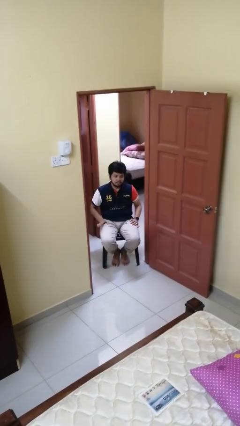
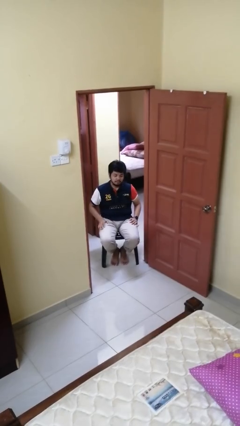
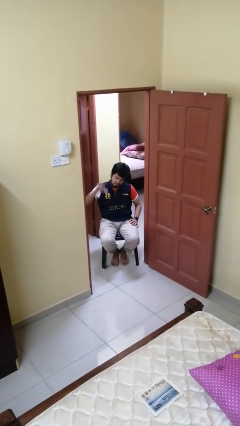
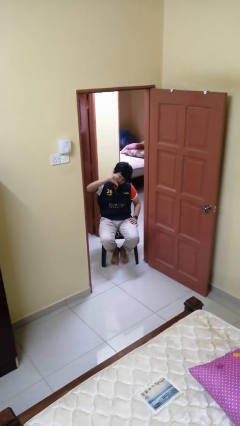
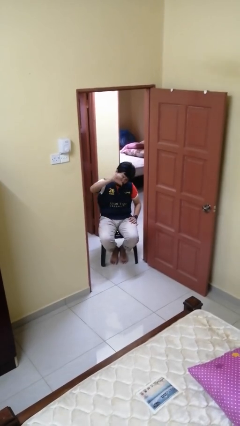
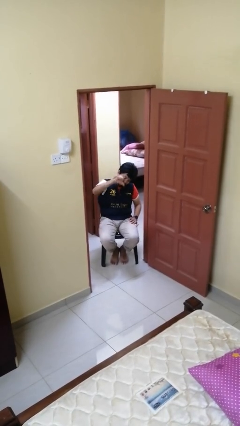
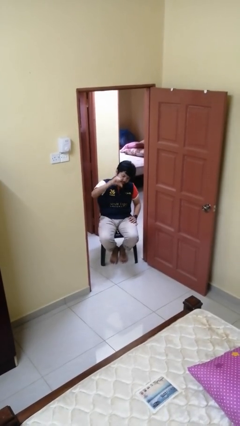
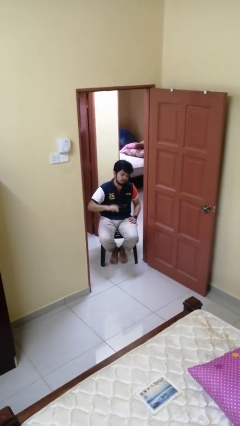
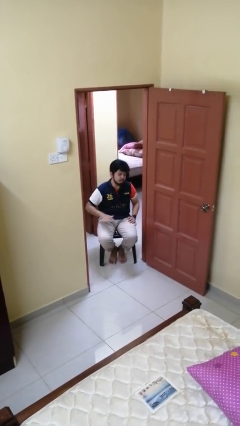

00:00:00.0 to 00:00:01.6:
person gestures thumbs down

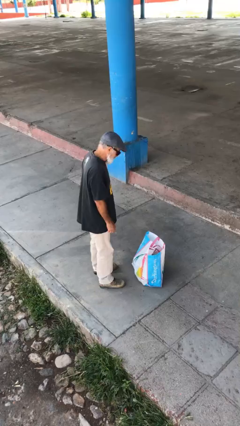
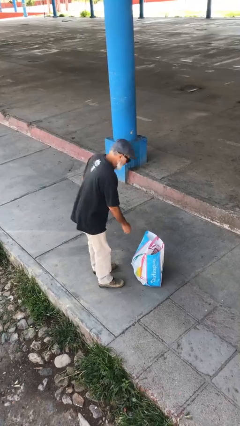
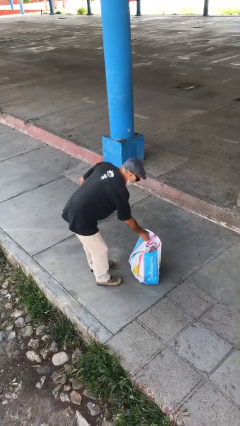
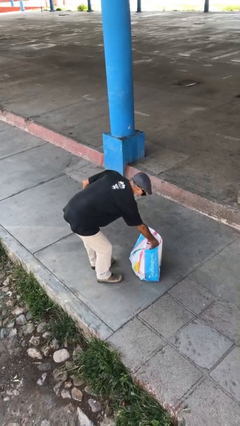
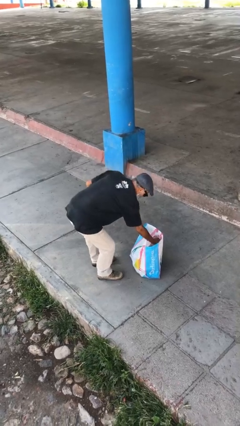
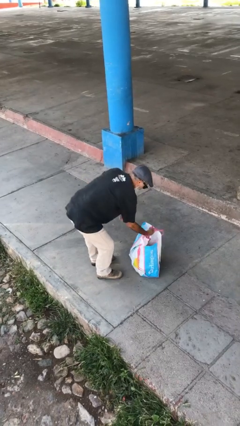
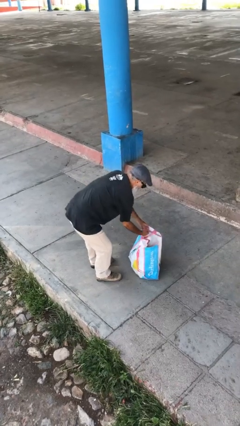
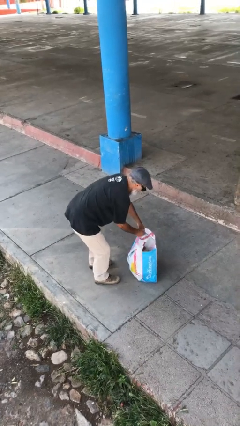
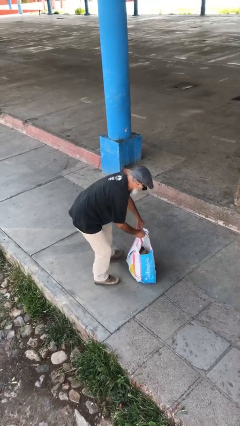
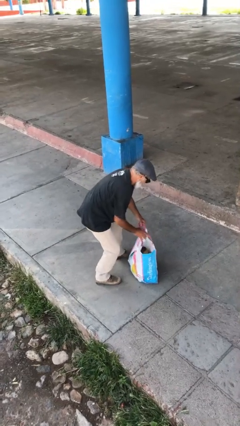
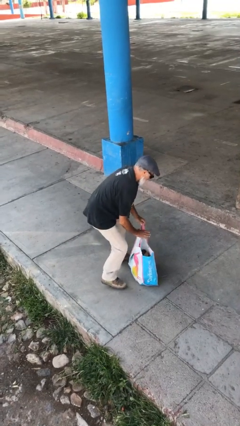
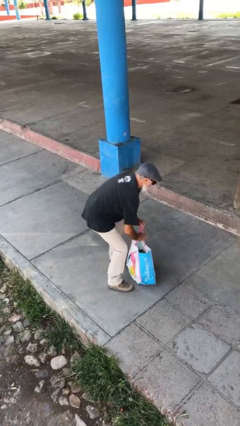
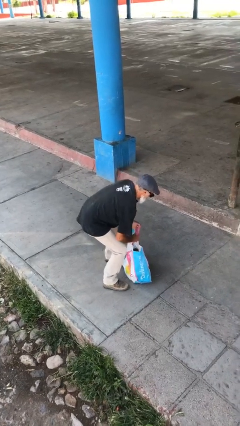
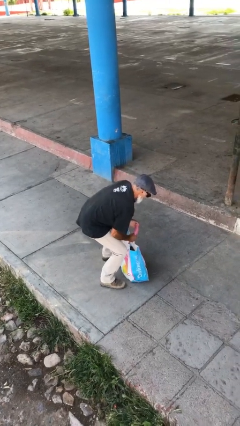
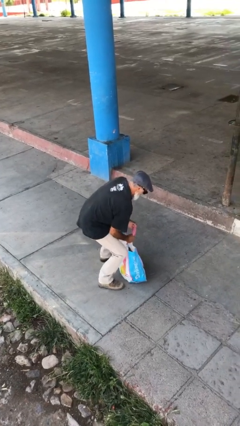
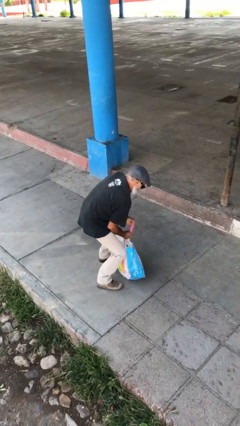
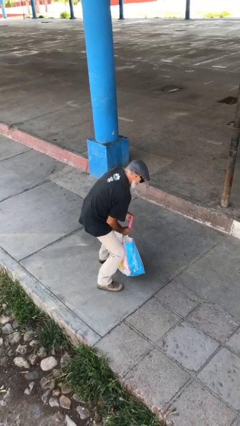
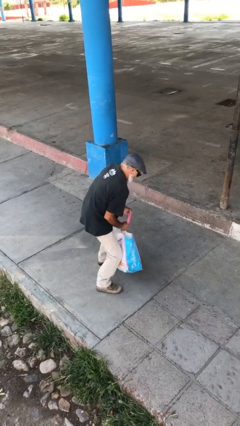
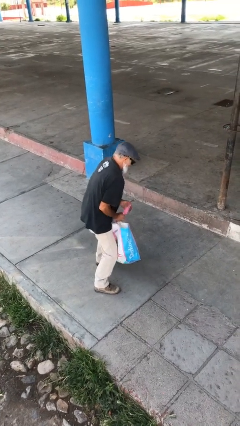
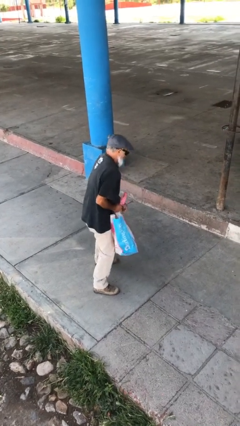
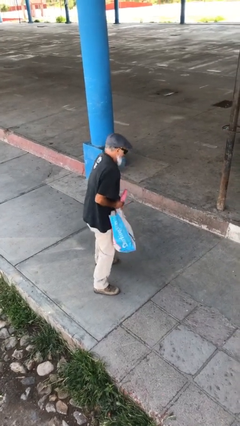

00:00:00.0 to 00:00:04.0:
person picks up object from floor

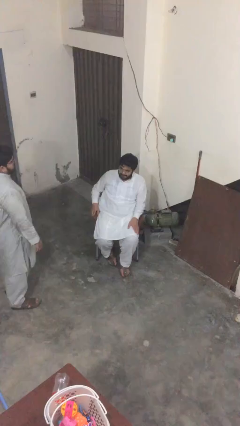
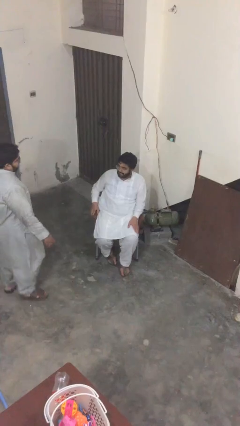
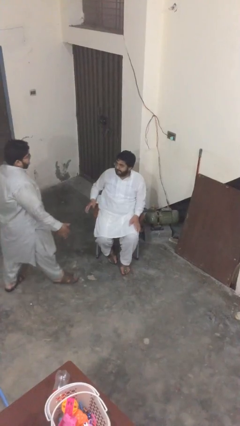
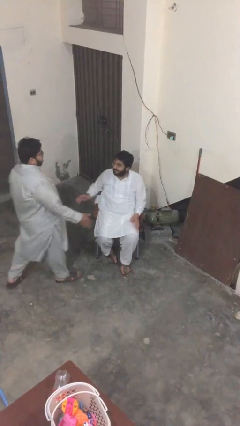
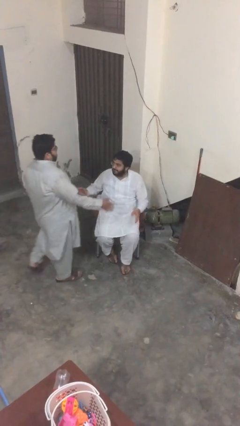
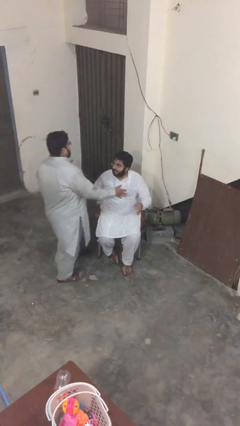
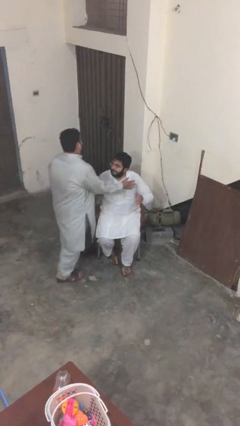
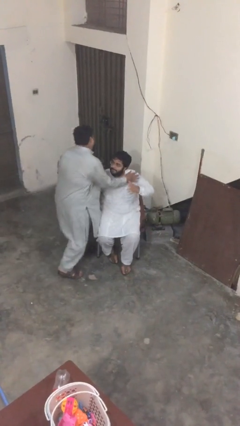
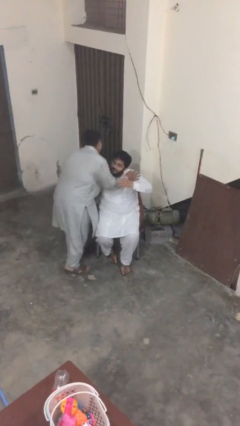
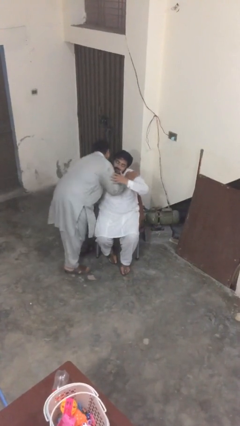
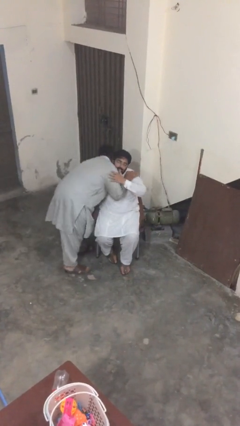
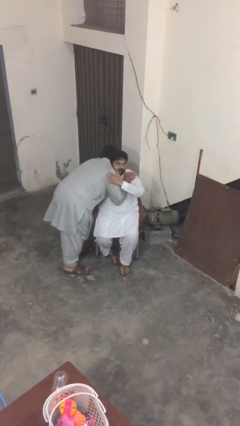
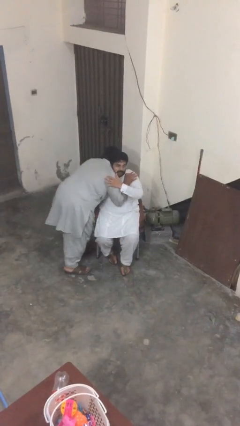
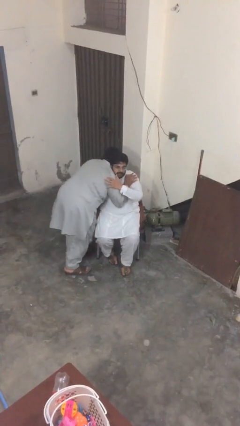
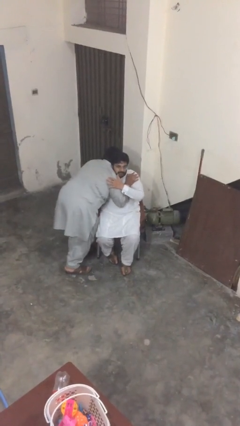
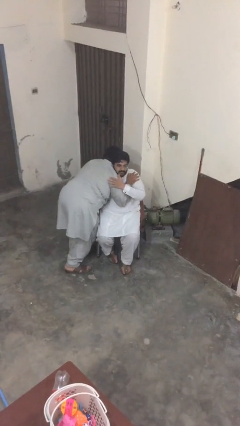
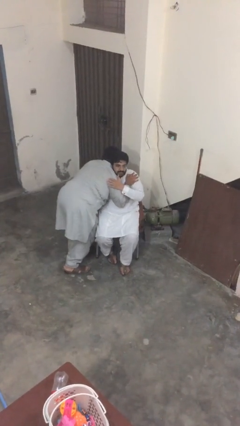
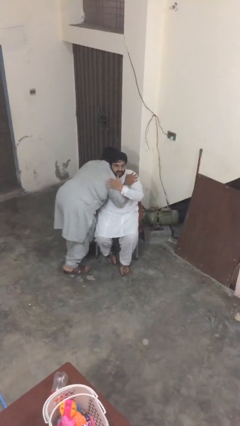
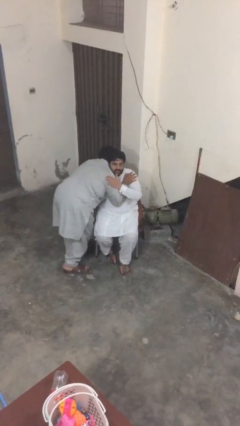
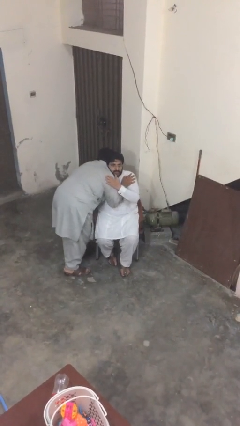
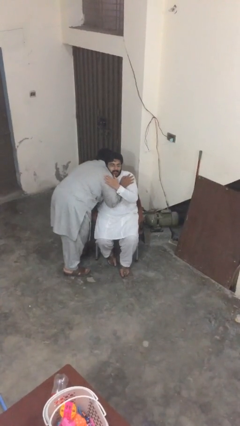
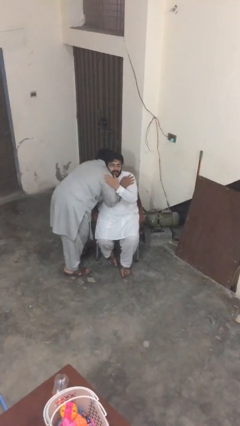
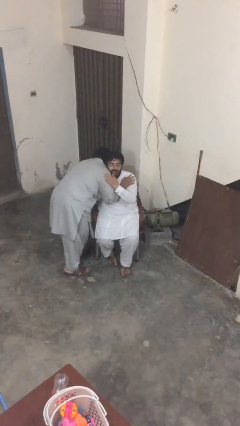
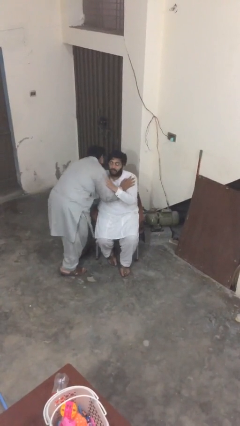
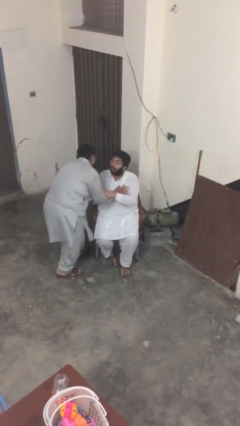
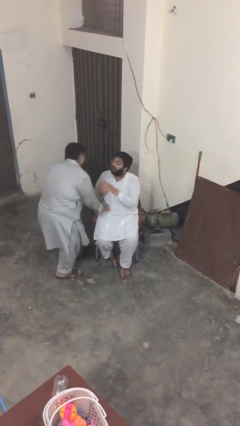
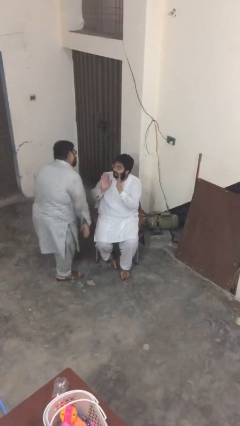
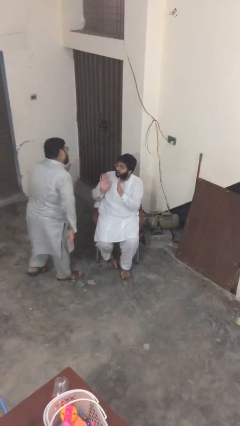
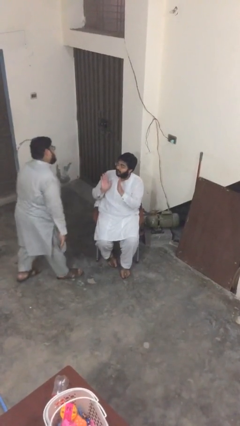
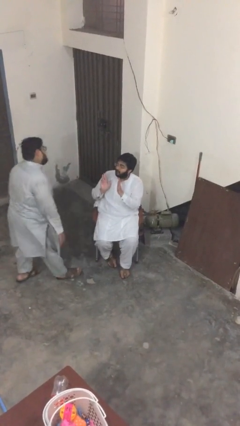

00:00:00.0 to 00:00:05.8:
person embraces person

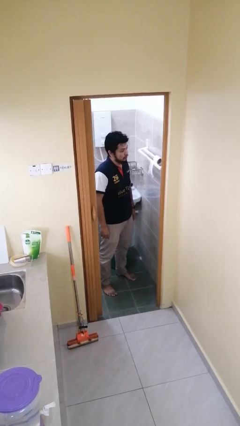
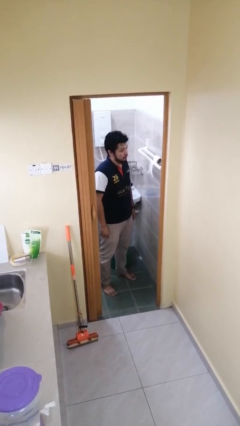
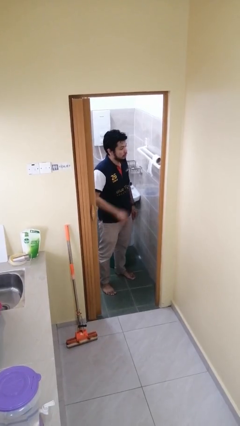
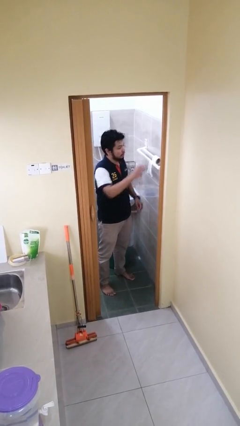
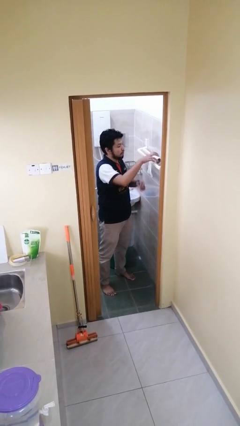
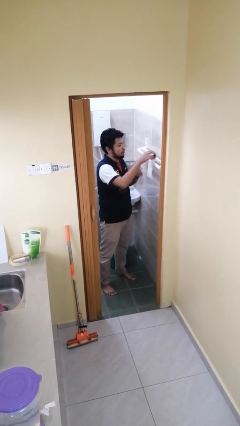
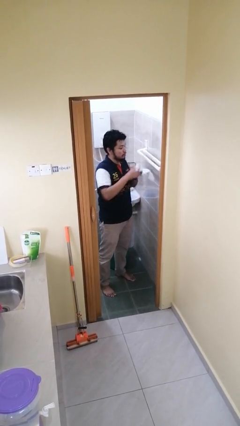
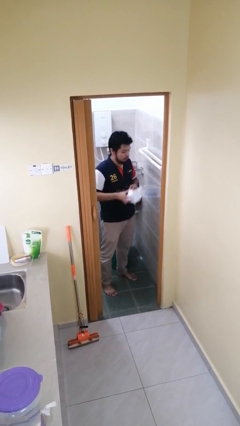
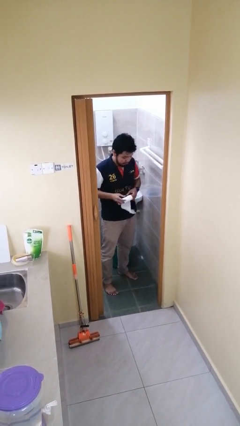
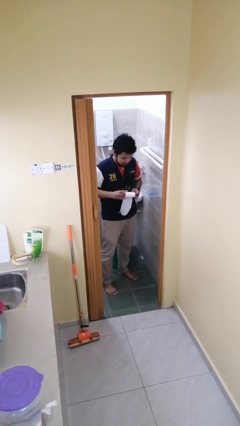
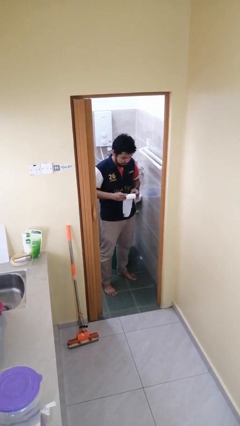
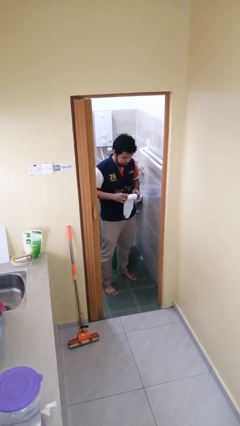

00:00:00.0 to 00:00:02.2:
person picks up object from countertop

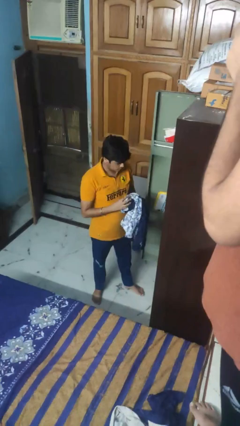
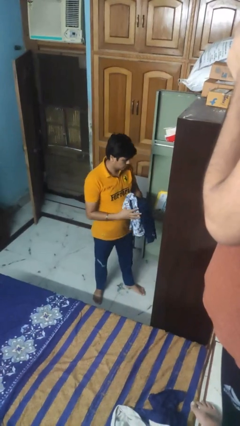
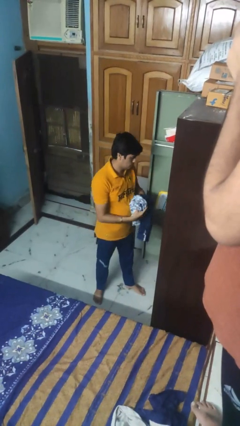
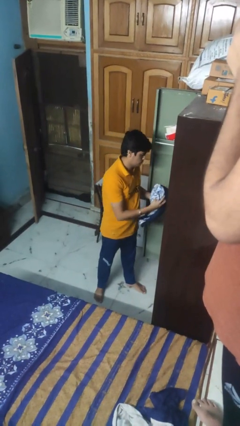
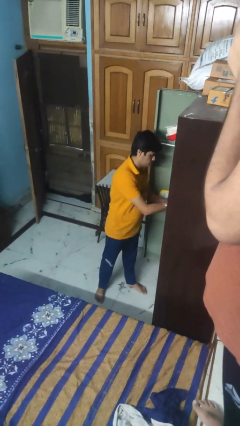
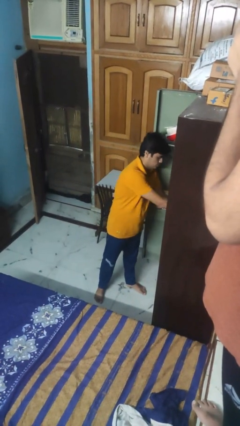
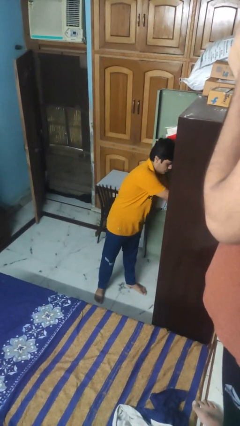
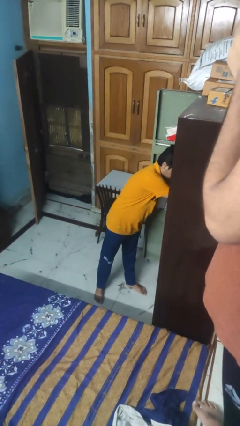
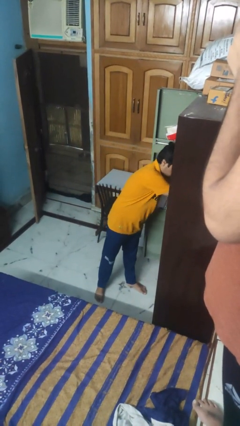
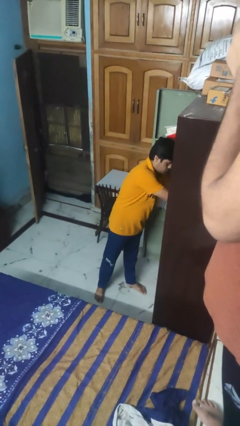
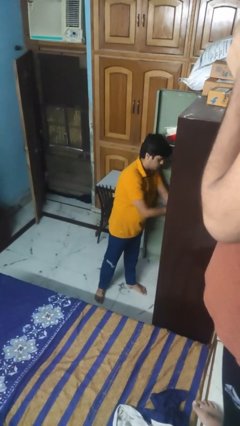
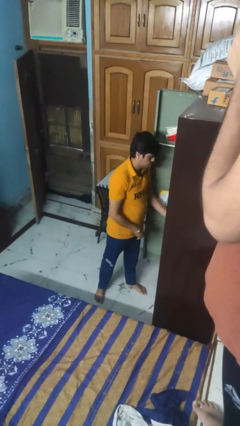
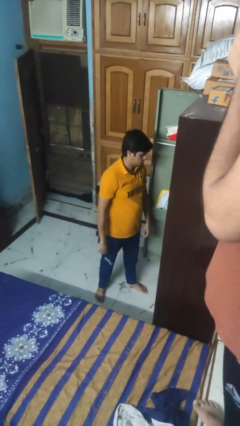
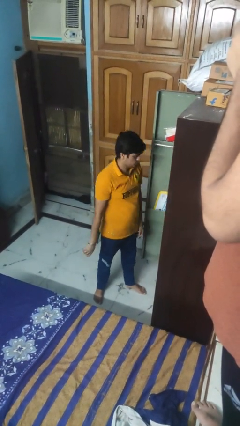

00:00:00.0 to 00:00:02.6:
person puts clothes into dresser

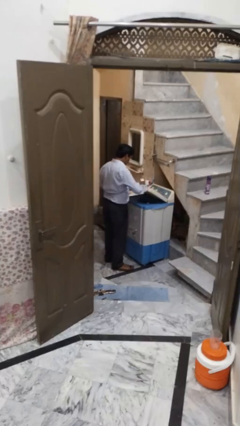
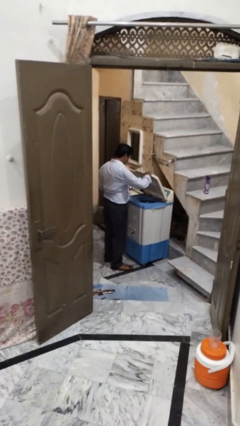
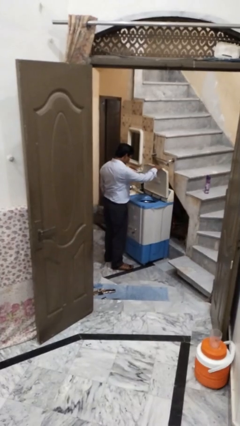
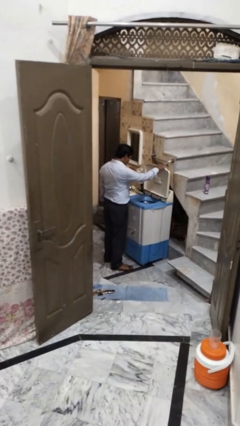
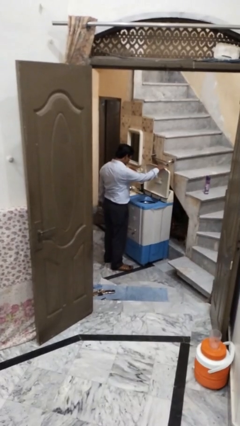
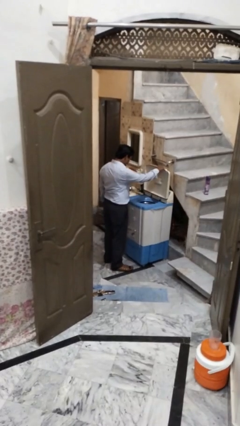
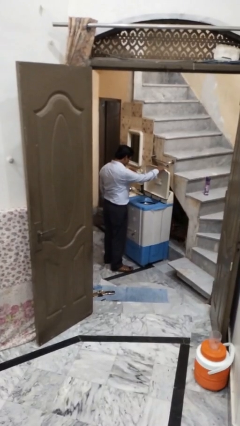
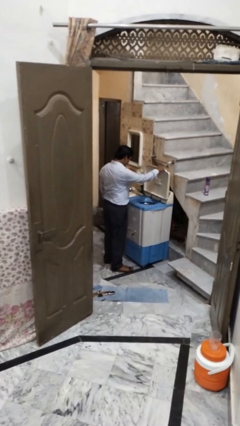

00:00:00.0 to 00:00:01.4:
person opens clothes washer
